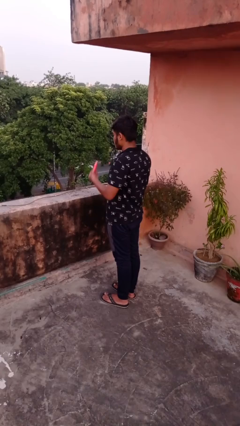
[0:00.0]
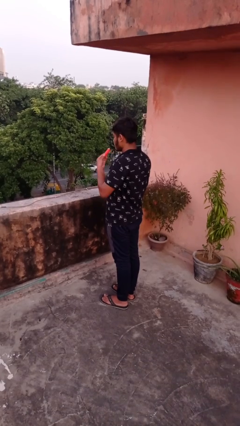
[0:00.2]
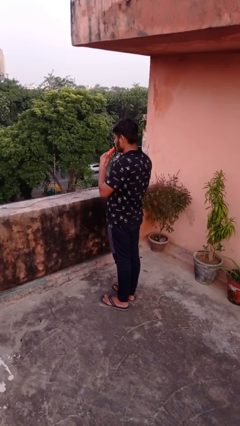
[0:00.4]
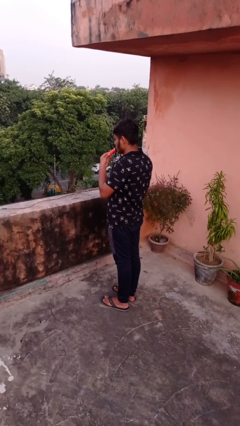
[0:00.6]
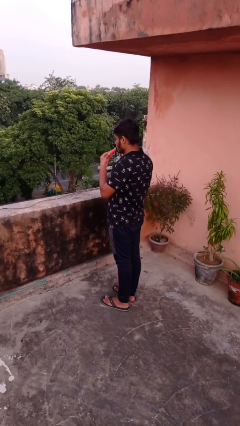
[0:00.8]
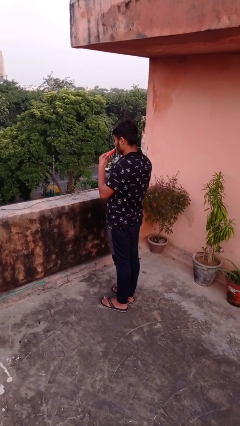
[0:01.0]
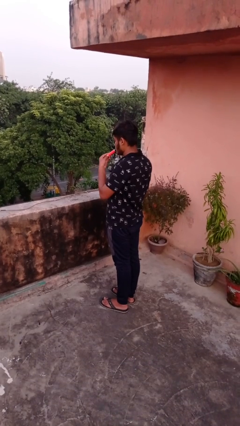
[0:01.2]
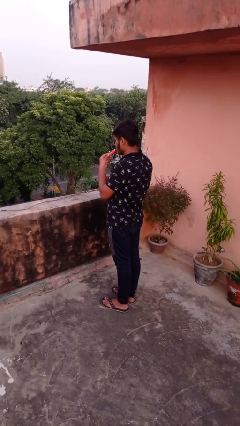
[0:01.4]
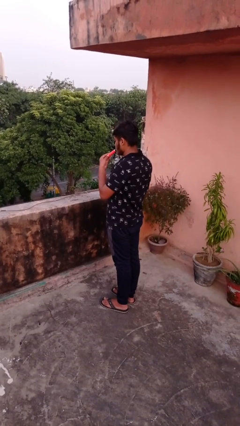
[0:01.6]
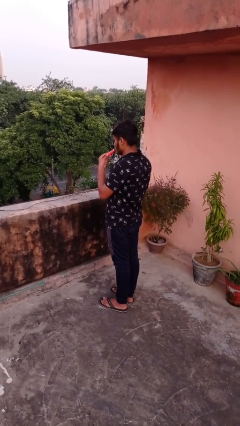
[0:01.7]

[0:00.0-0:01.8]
person vapes

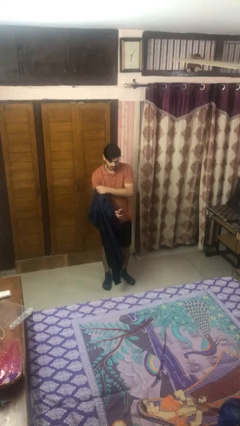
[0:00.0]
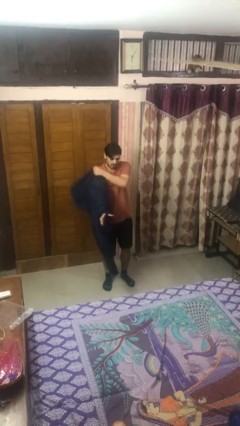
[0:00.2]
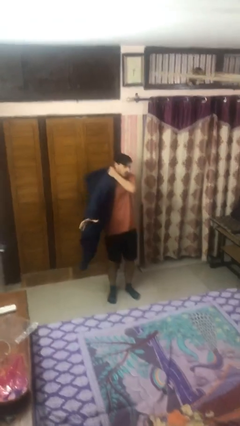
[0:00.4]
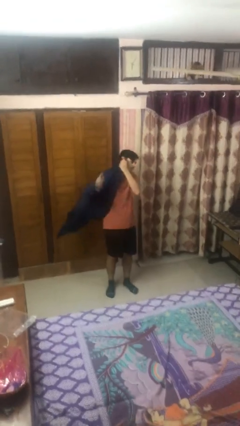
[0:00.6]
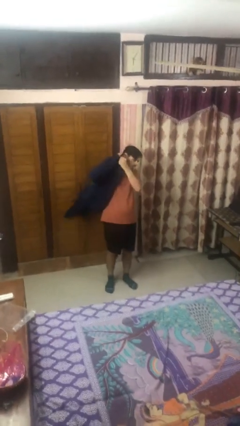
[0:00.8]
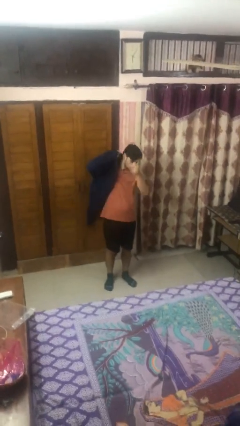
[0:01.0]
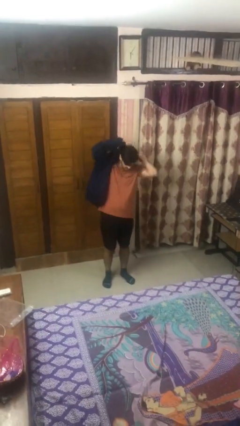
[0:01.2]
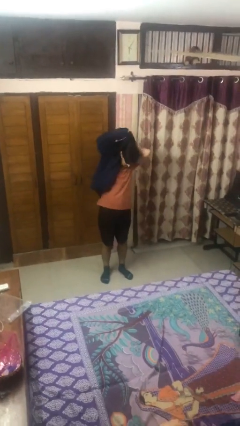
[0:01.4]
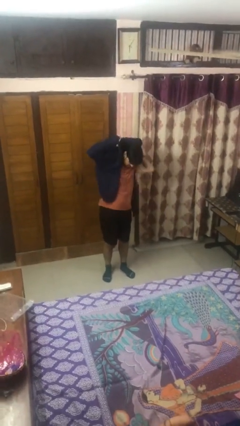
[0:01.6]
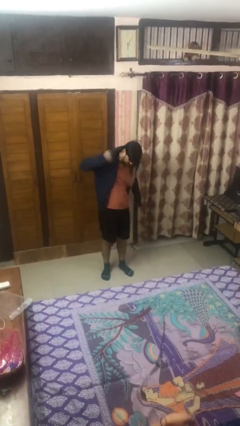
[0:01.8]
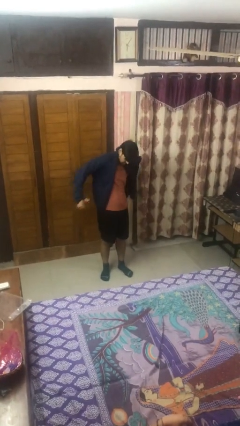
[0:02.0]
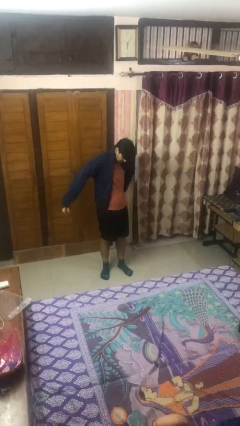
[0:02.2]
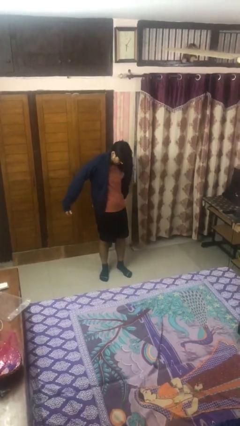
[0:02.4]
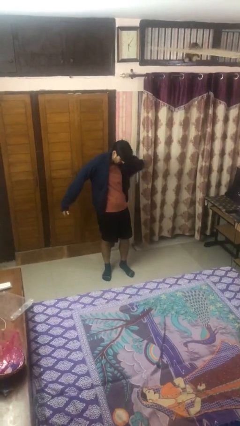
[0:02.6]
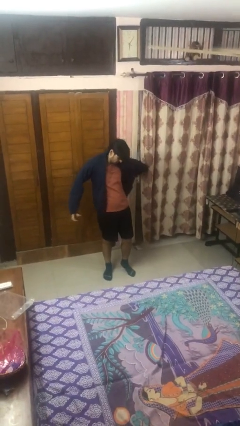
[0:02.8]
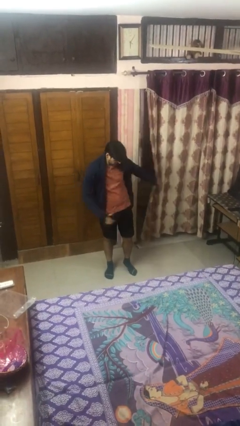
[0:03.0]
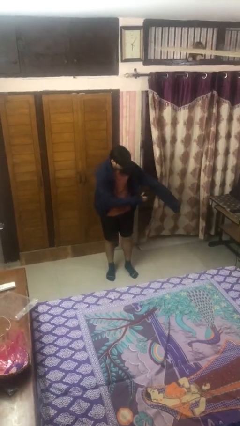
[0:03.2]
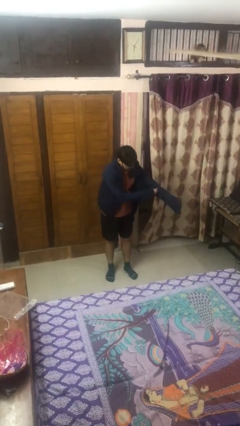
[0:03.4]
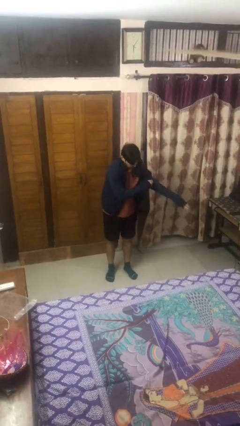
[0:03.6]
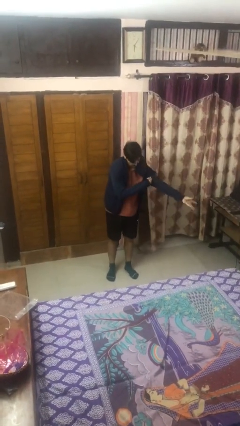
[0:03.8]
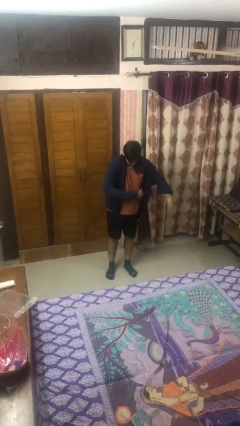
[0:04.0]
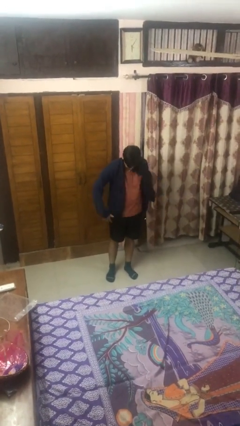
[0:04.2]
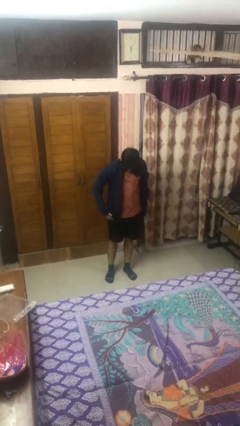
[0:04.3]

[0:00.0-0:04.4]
person puts on jacket

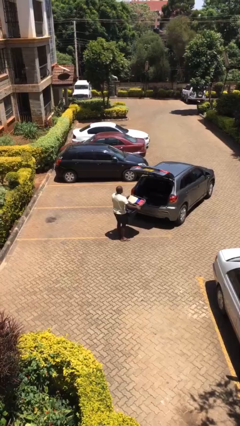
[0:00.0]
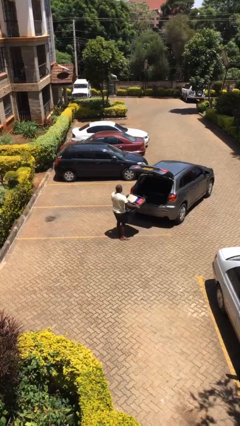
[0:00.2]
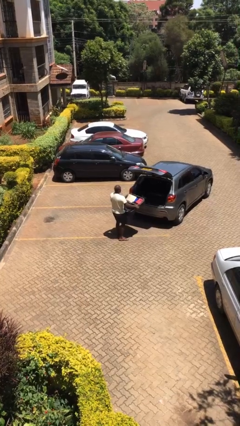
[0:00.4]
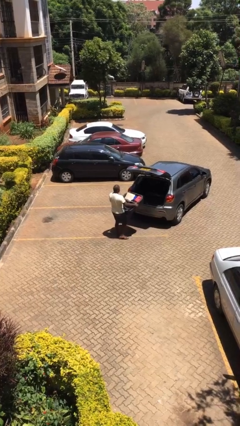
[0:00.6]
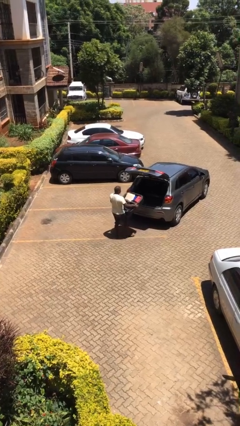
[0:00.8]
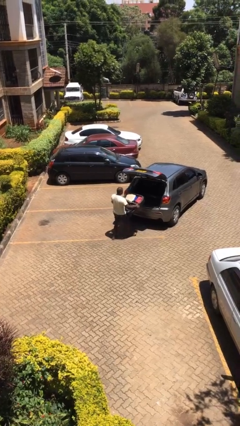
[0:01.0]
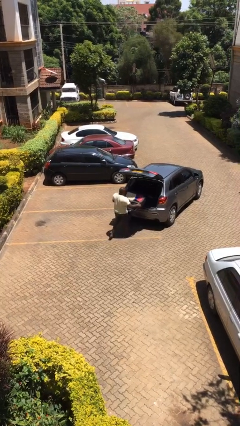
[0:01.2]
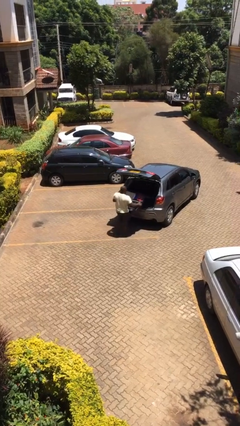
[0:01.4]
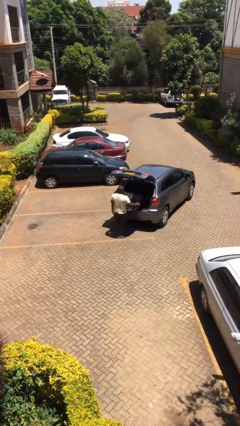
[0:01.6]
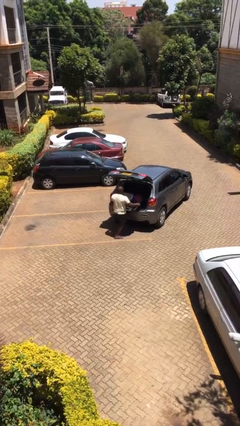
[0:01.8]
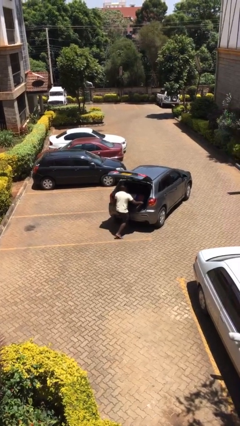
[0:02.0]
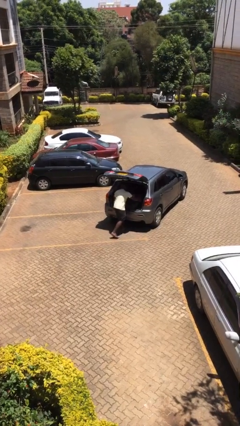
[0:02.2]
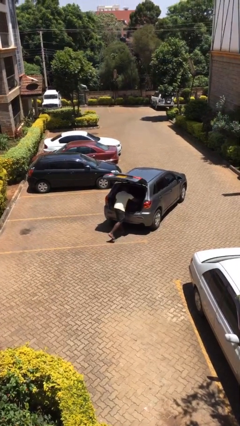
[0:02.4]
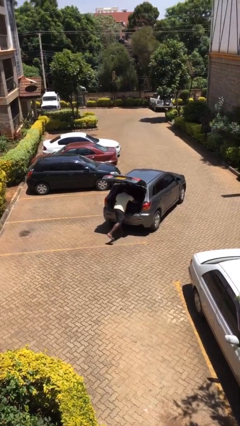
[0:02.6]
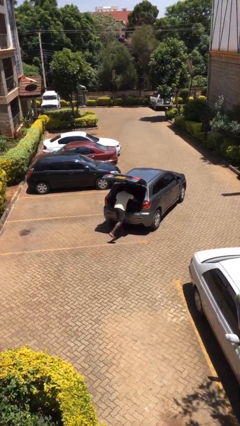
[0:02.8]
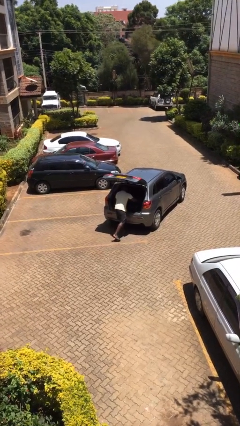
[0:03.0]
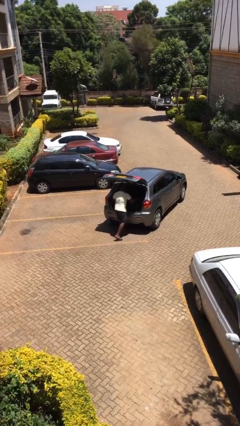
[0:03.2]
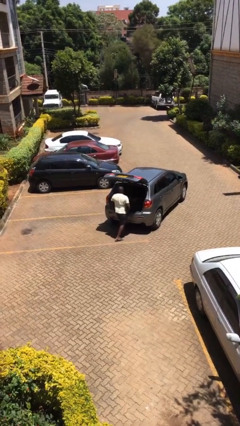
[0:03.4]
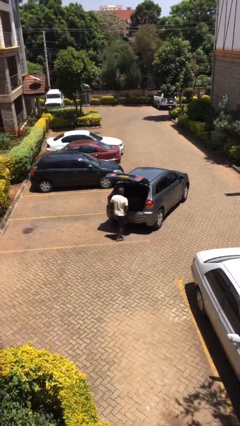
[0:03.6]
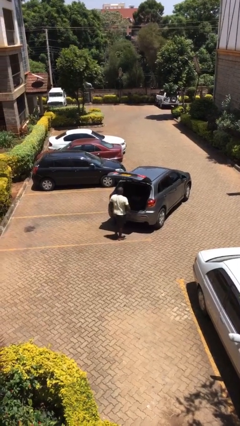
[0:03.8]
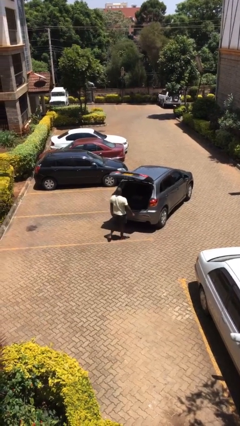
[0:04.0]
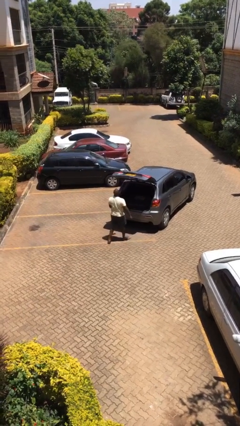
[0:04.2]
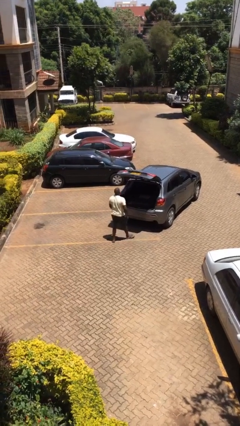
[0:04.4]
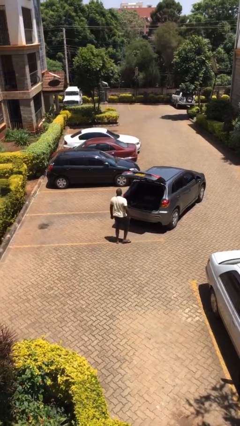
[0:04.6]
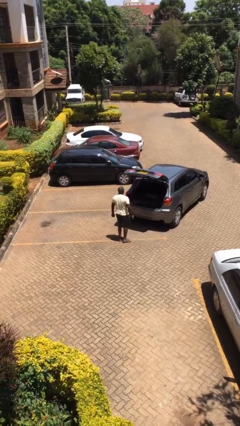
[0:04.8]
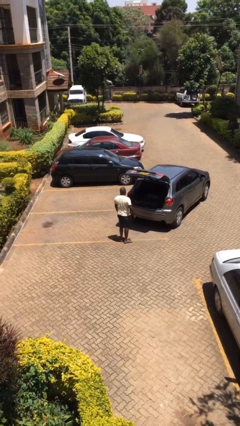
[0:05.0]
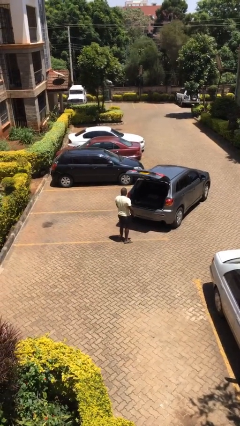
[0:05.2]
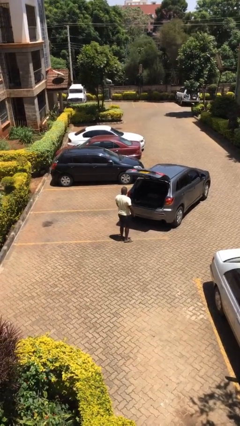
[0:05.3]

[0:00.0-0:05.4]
person loads car

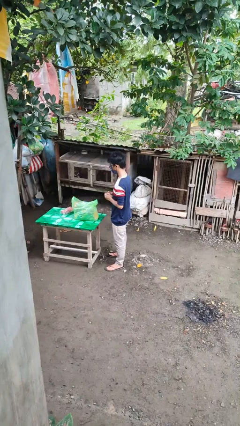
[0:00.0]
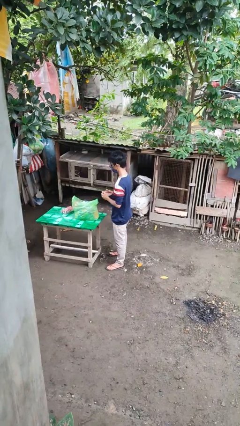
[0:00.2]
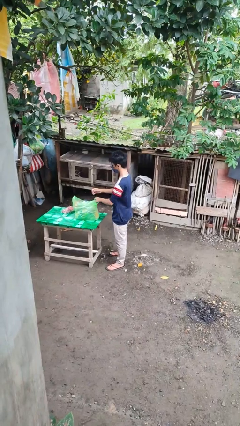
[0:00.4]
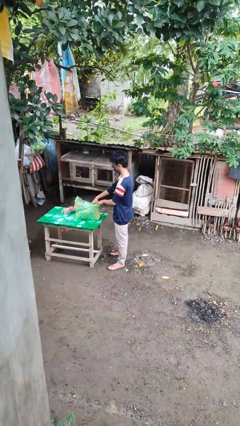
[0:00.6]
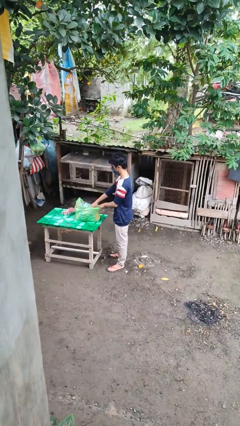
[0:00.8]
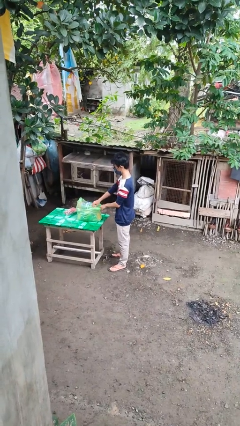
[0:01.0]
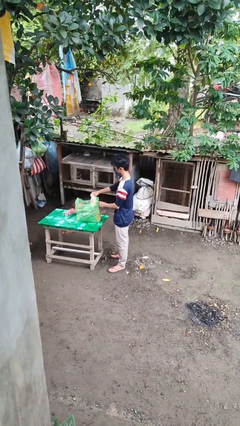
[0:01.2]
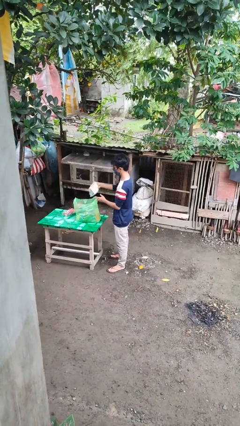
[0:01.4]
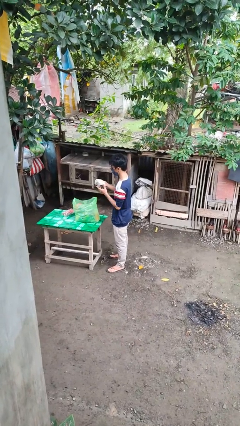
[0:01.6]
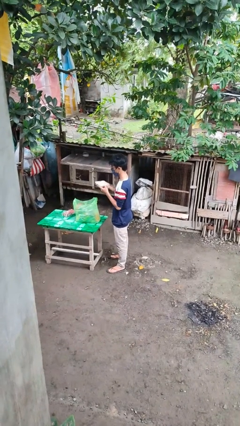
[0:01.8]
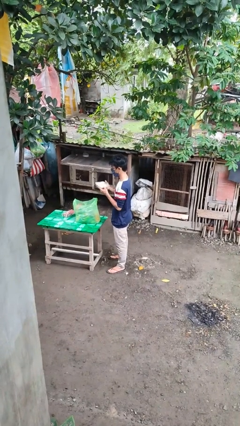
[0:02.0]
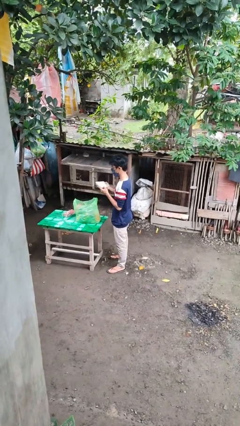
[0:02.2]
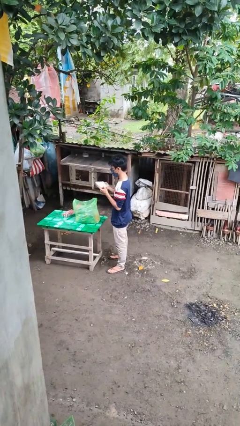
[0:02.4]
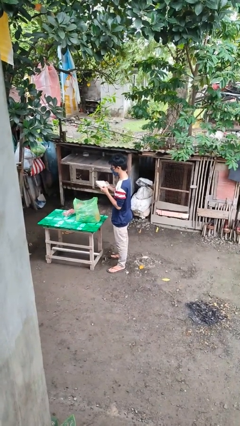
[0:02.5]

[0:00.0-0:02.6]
person takes object from bag

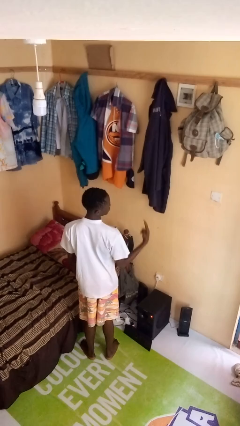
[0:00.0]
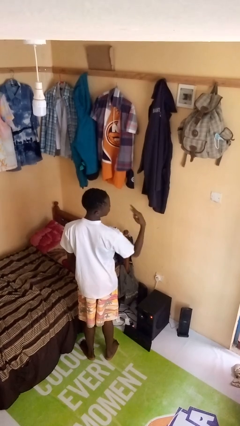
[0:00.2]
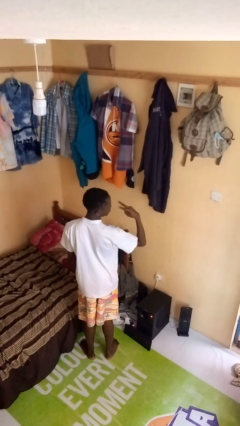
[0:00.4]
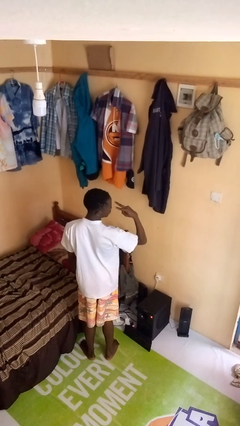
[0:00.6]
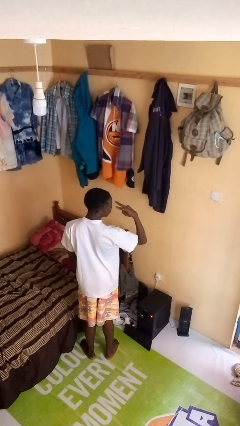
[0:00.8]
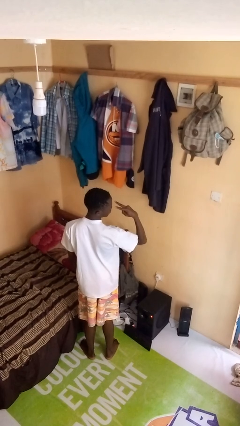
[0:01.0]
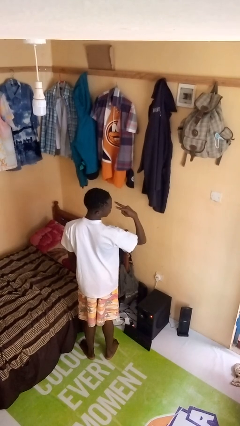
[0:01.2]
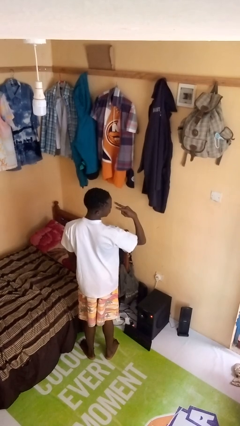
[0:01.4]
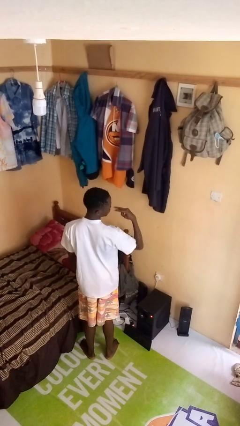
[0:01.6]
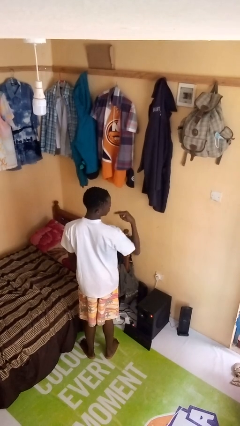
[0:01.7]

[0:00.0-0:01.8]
person gestures watch closely

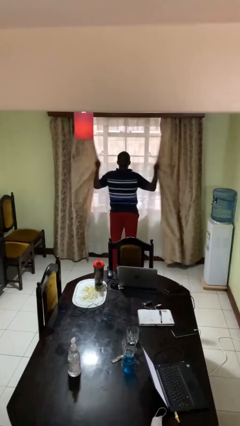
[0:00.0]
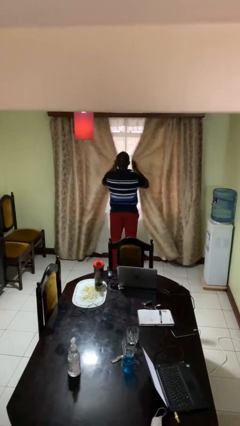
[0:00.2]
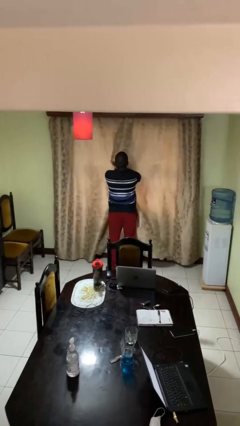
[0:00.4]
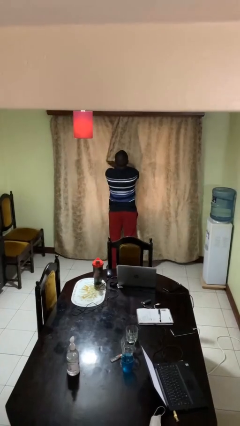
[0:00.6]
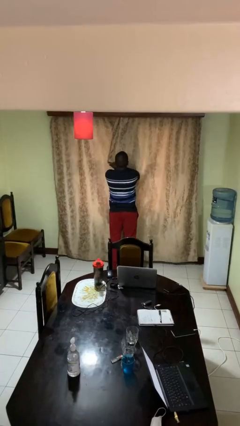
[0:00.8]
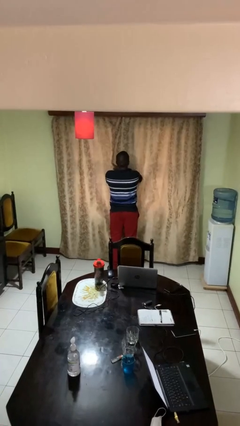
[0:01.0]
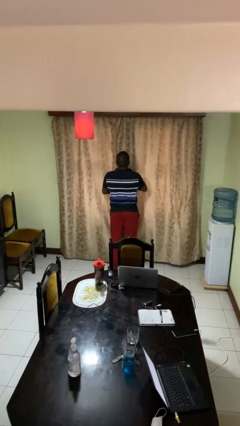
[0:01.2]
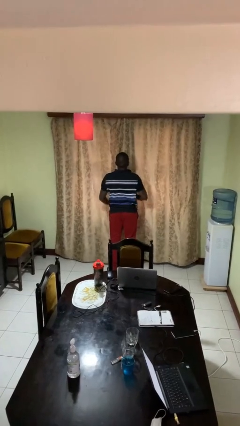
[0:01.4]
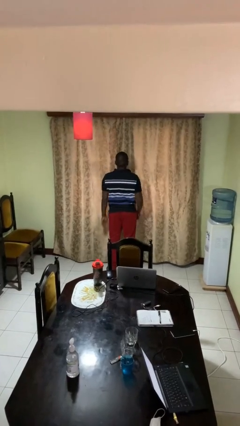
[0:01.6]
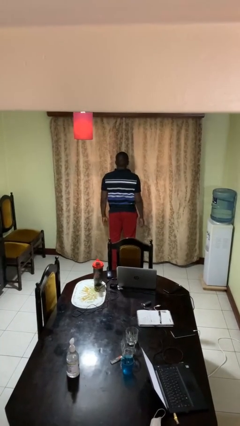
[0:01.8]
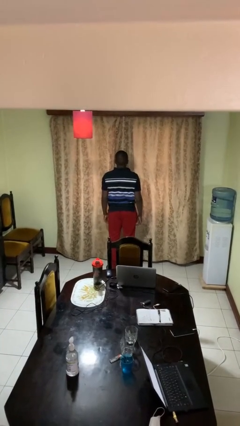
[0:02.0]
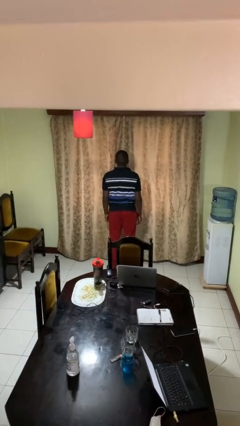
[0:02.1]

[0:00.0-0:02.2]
person closes curtains
